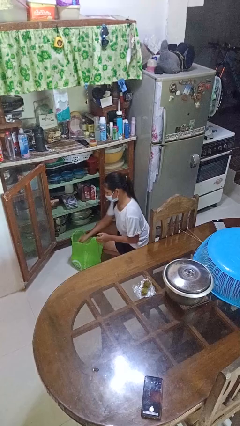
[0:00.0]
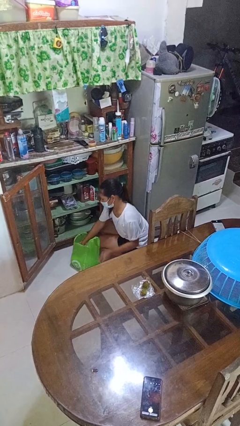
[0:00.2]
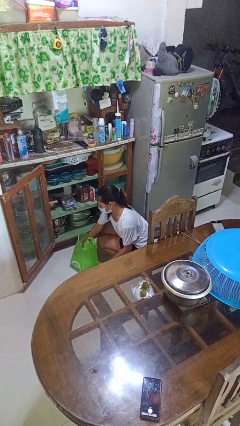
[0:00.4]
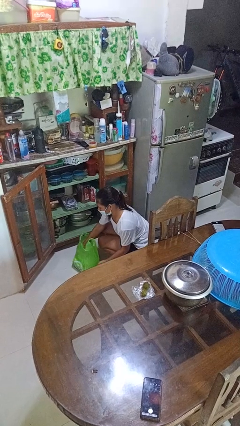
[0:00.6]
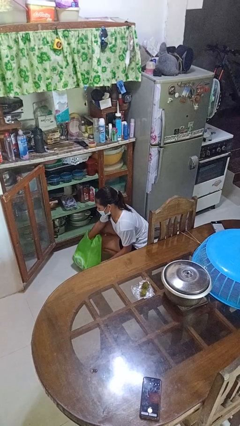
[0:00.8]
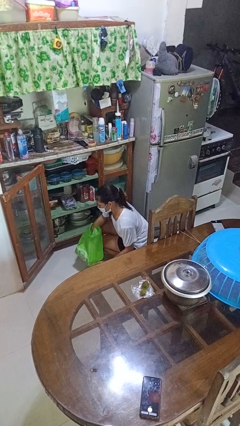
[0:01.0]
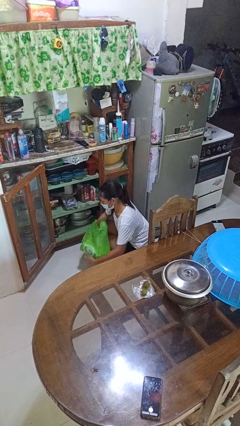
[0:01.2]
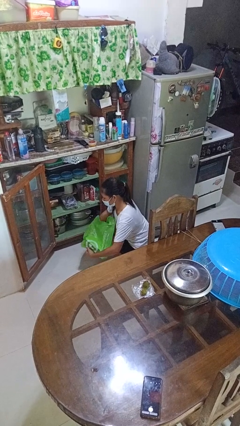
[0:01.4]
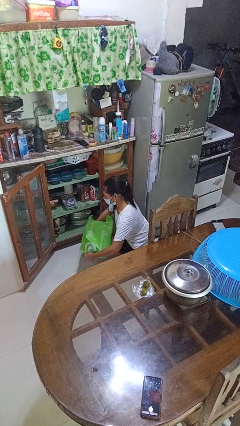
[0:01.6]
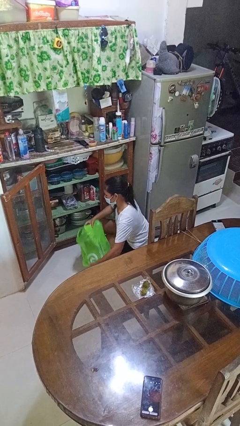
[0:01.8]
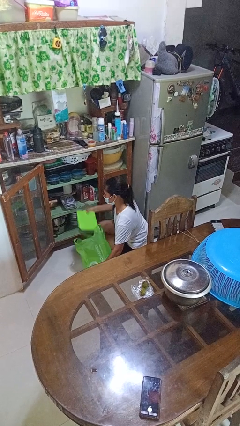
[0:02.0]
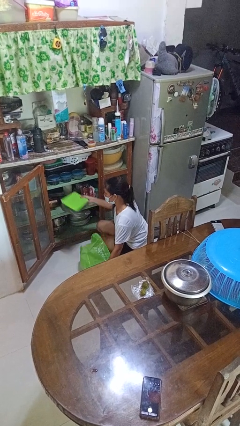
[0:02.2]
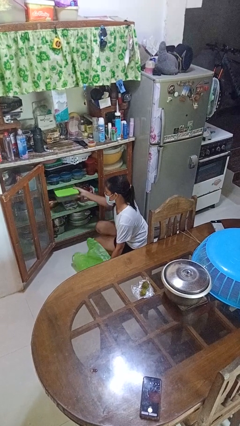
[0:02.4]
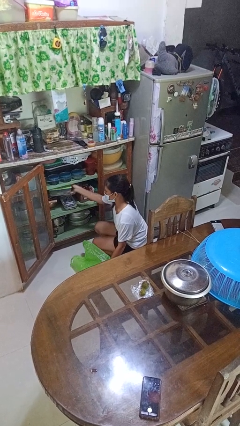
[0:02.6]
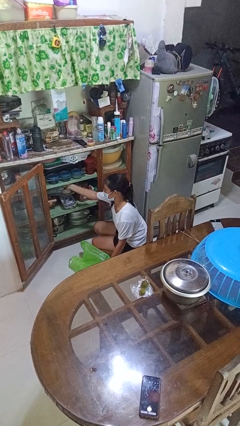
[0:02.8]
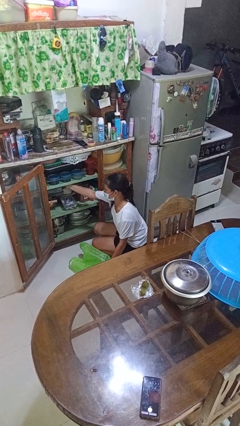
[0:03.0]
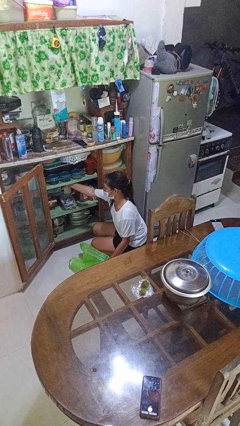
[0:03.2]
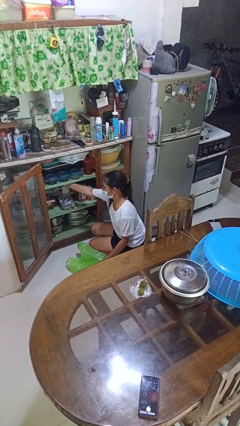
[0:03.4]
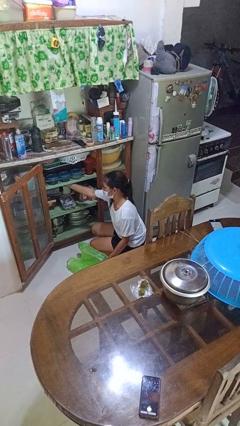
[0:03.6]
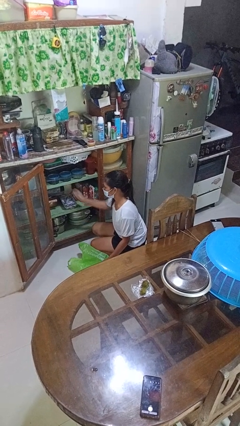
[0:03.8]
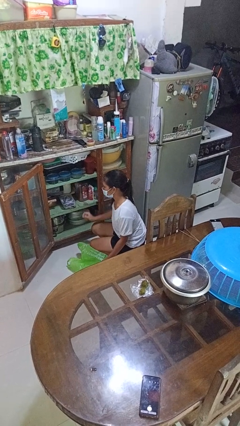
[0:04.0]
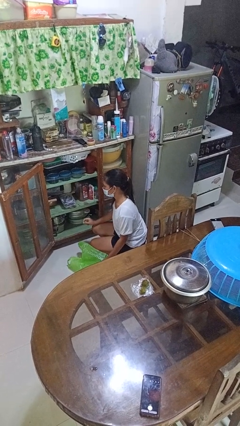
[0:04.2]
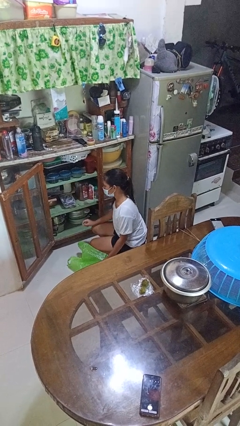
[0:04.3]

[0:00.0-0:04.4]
person loads groceries into cabinet

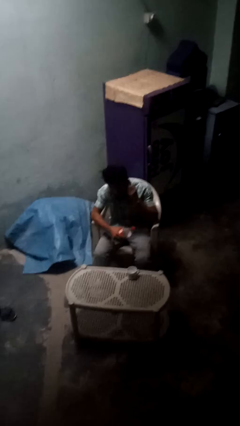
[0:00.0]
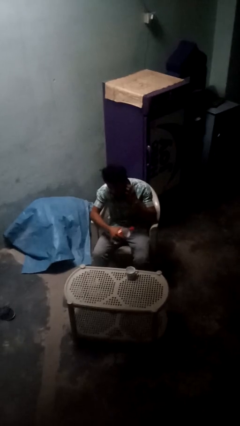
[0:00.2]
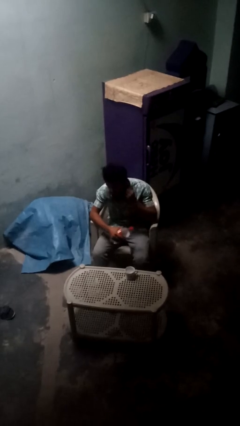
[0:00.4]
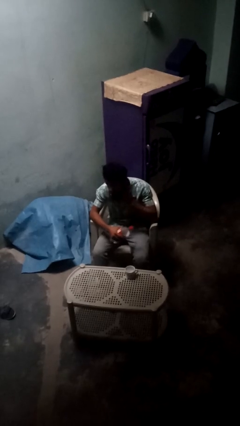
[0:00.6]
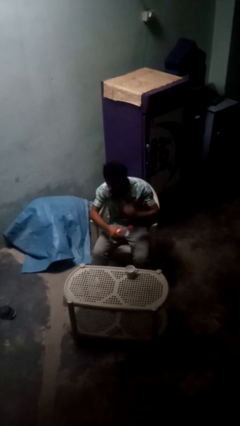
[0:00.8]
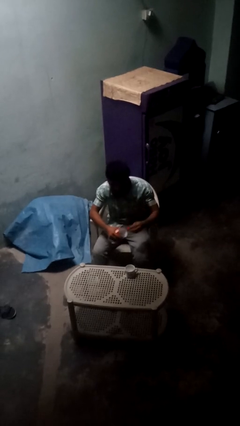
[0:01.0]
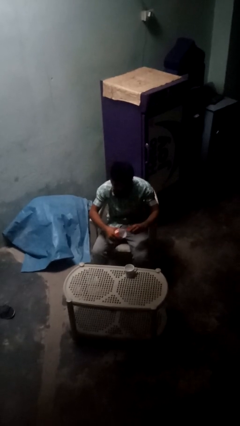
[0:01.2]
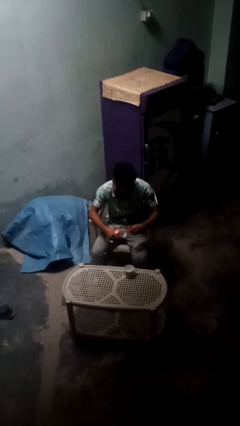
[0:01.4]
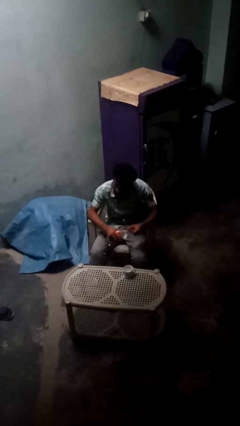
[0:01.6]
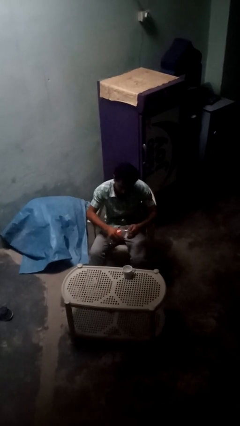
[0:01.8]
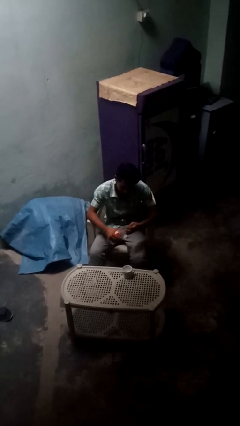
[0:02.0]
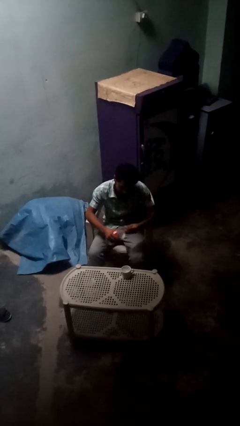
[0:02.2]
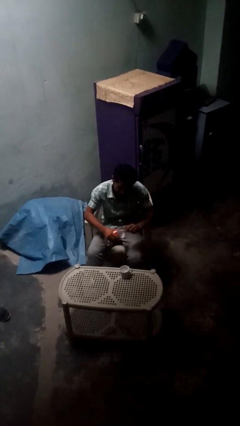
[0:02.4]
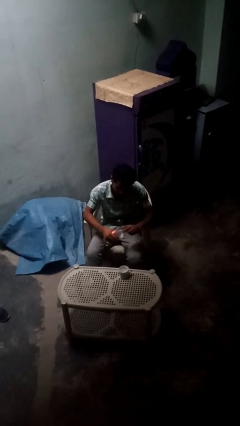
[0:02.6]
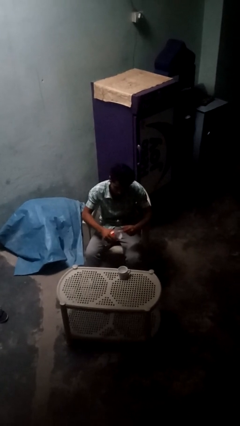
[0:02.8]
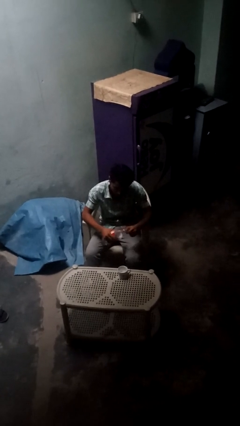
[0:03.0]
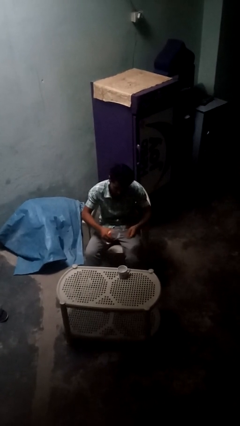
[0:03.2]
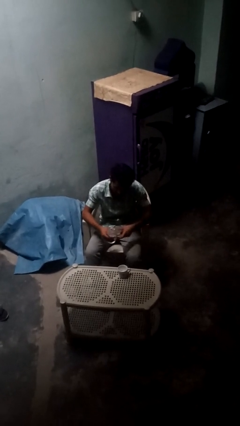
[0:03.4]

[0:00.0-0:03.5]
person unscrews lid from bottle

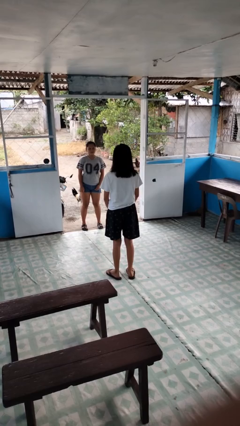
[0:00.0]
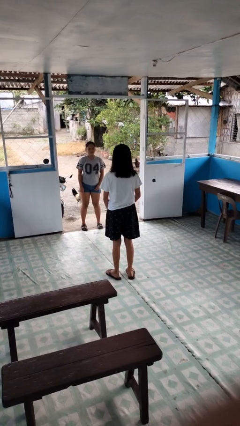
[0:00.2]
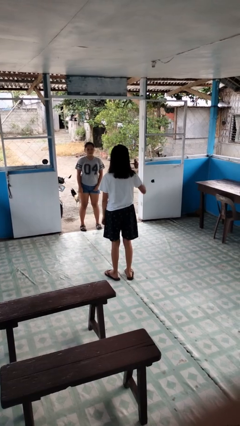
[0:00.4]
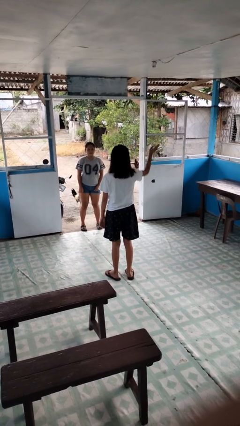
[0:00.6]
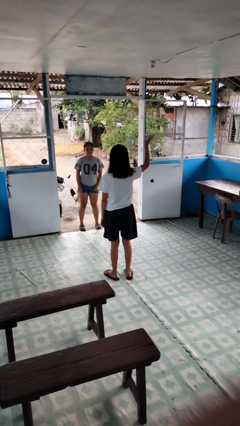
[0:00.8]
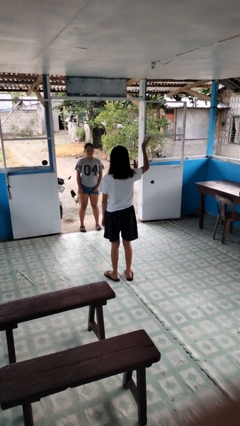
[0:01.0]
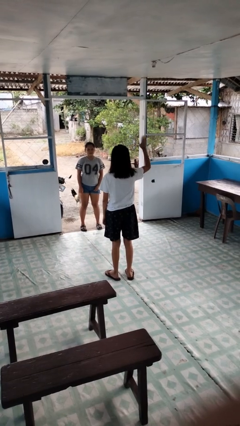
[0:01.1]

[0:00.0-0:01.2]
person waves at person

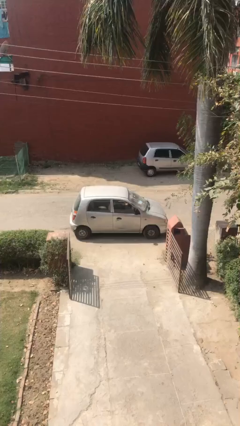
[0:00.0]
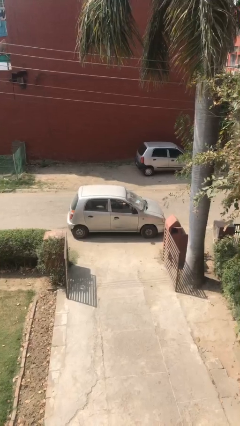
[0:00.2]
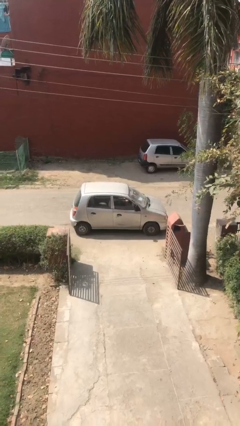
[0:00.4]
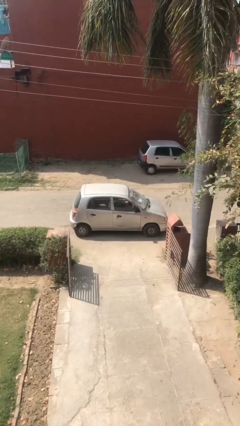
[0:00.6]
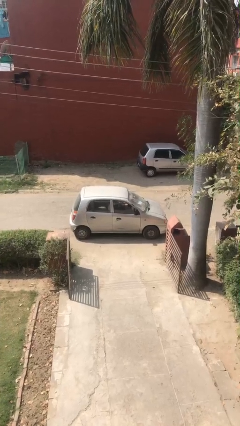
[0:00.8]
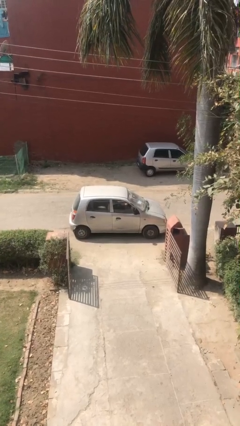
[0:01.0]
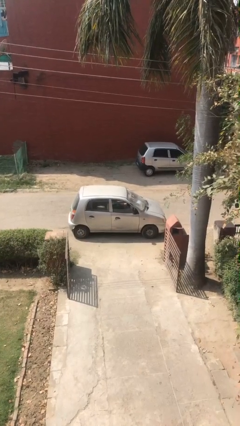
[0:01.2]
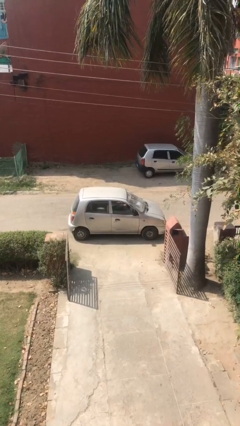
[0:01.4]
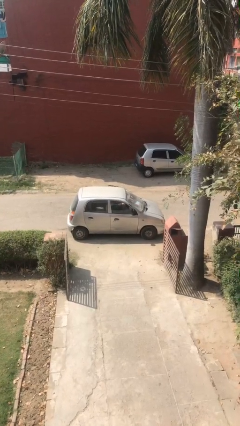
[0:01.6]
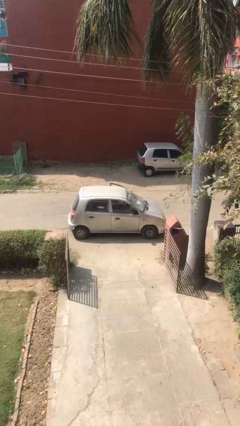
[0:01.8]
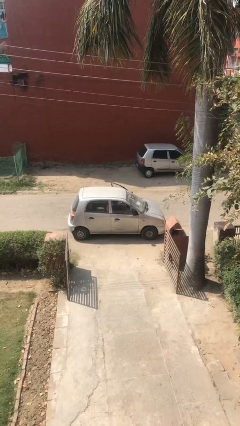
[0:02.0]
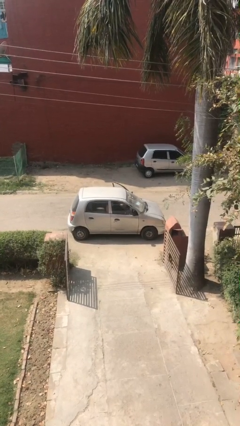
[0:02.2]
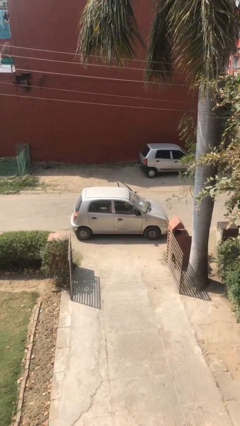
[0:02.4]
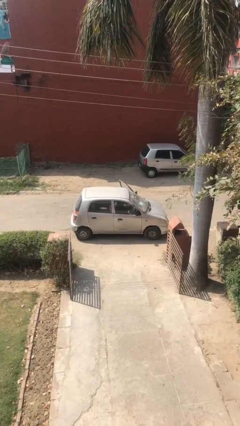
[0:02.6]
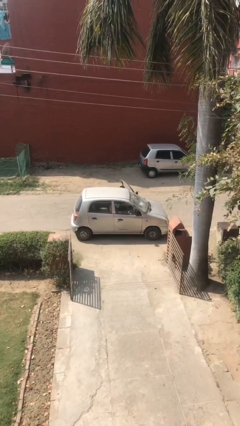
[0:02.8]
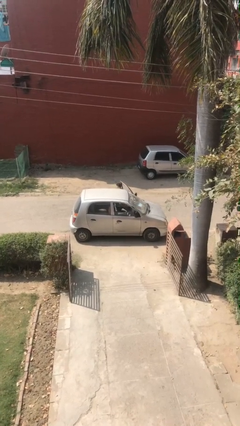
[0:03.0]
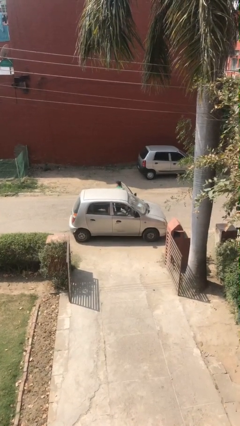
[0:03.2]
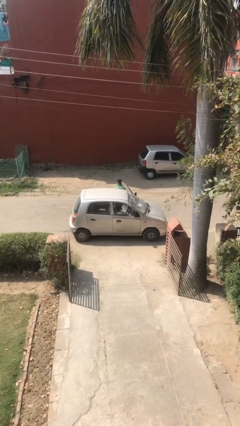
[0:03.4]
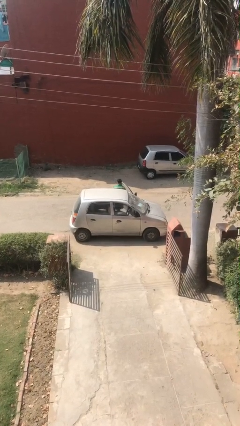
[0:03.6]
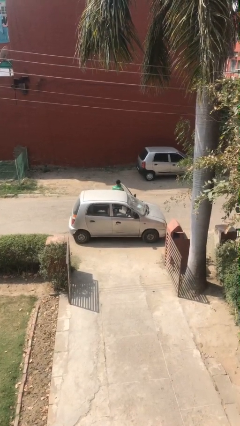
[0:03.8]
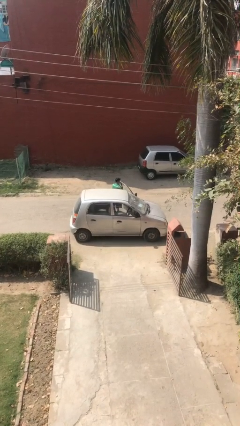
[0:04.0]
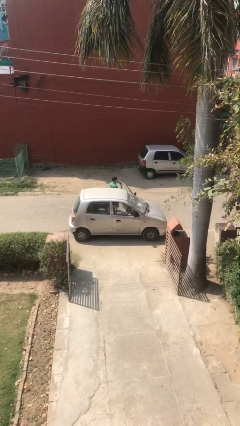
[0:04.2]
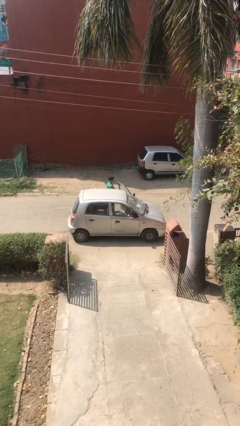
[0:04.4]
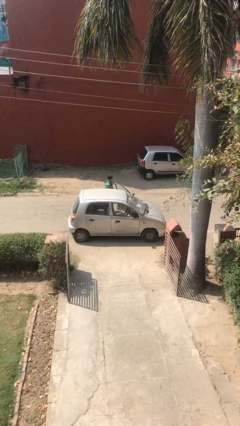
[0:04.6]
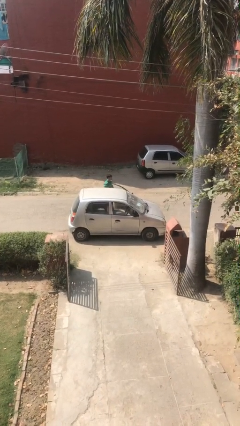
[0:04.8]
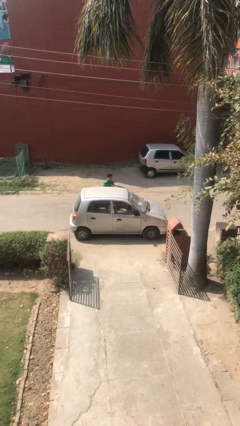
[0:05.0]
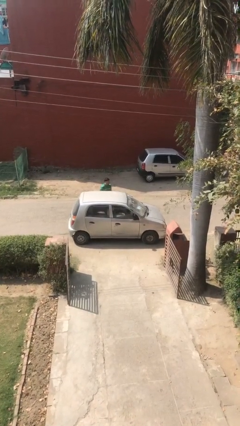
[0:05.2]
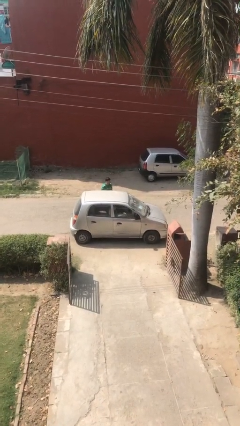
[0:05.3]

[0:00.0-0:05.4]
car drops off person

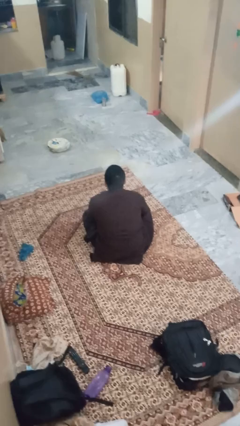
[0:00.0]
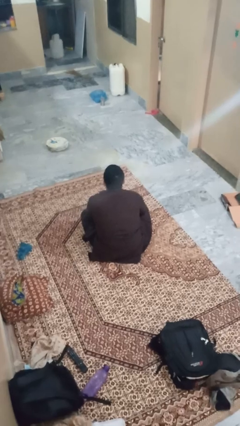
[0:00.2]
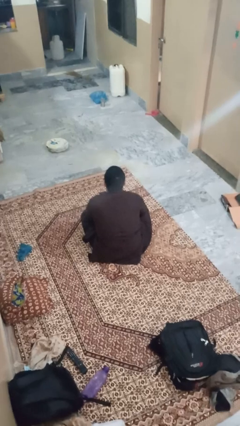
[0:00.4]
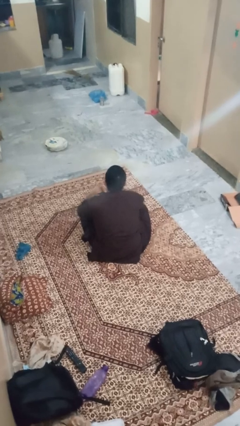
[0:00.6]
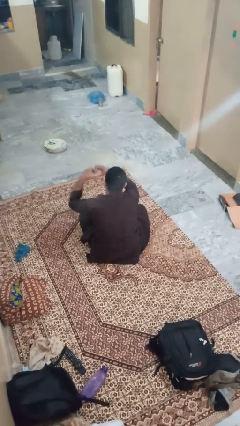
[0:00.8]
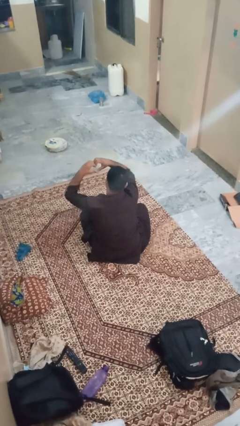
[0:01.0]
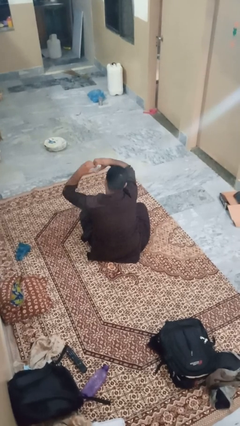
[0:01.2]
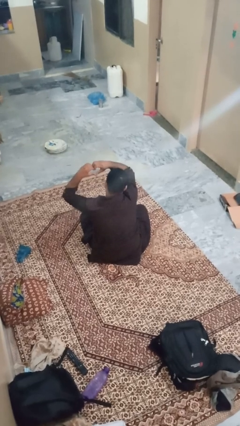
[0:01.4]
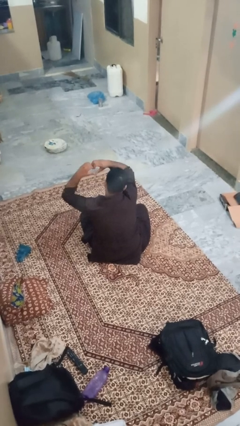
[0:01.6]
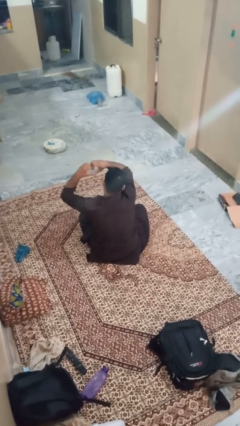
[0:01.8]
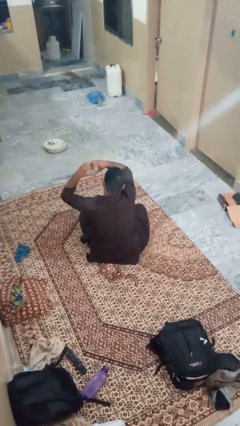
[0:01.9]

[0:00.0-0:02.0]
person gestures heart

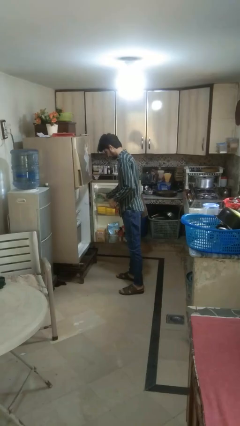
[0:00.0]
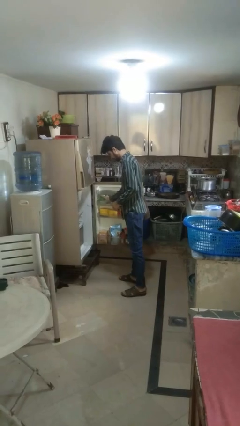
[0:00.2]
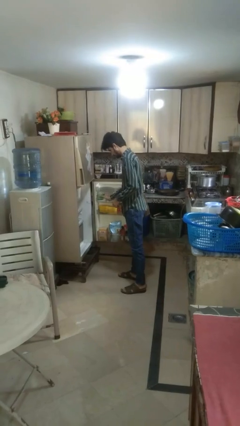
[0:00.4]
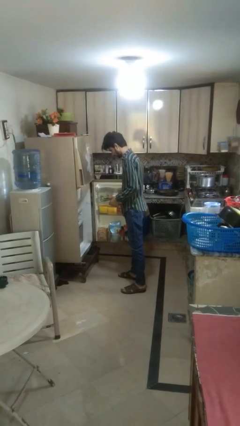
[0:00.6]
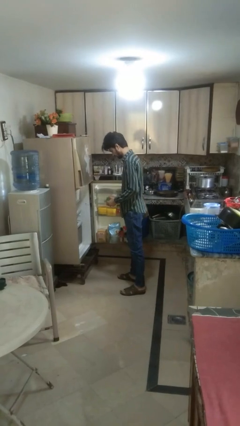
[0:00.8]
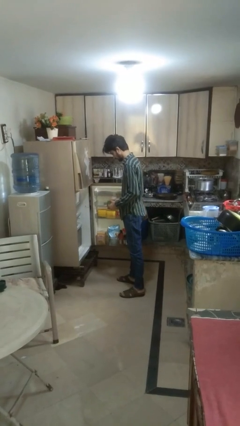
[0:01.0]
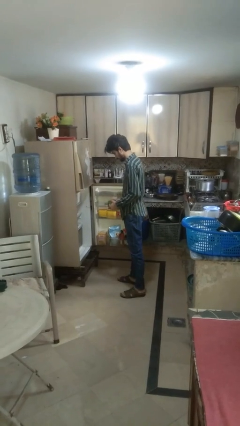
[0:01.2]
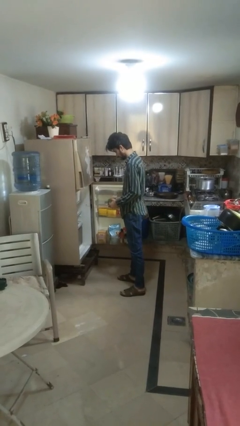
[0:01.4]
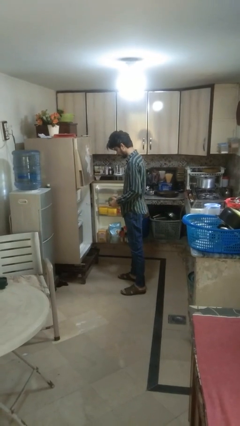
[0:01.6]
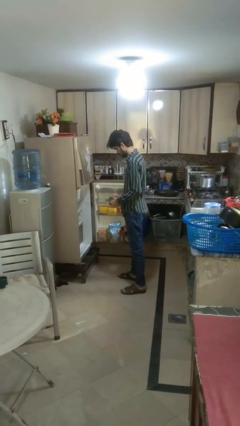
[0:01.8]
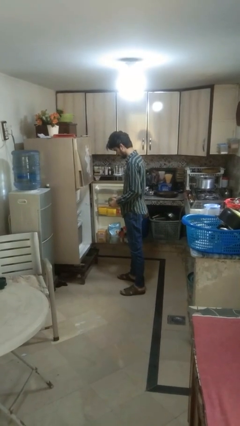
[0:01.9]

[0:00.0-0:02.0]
person takes object from refrigerator
